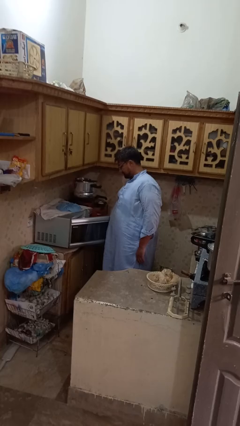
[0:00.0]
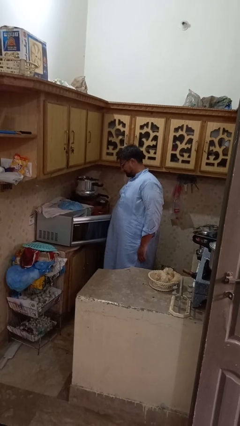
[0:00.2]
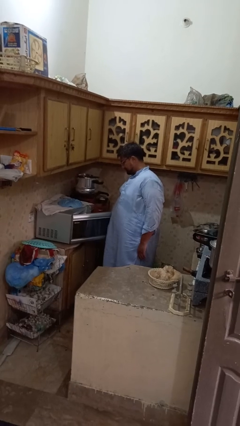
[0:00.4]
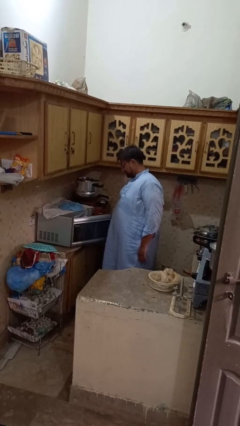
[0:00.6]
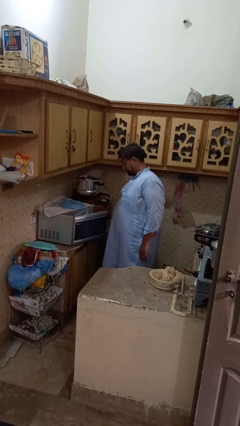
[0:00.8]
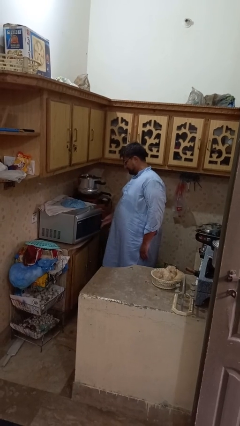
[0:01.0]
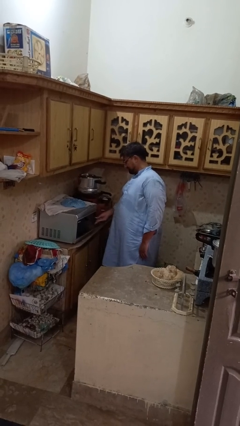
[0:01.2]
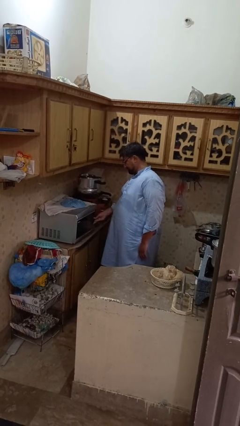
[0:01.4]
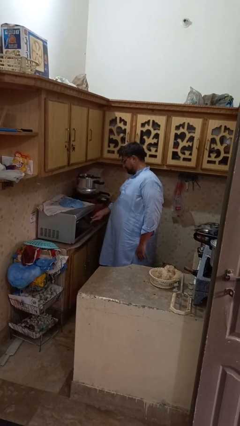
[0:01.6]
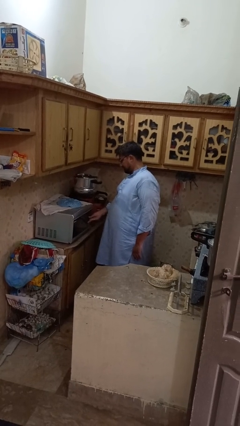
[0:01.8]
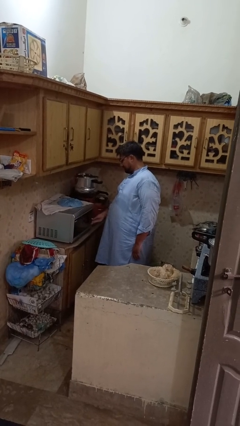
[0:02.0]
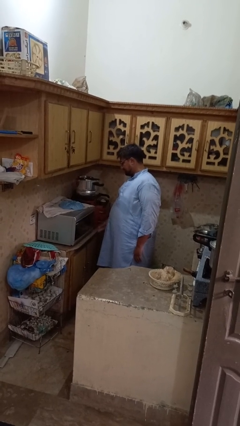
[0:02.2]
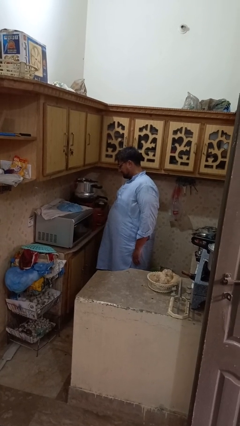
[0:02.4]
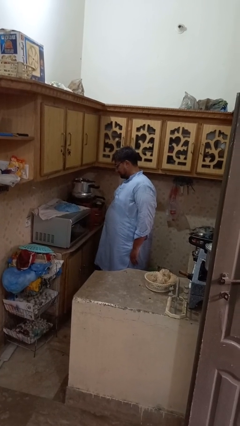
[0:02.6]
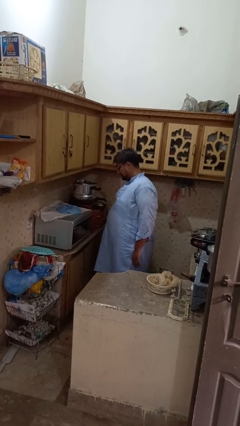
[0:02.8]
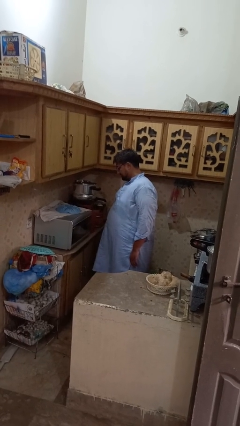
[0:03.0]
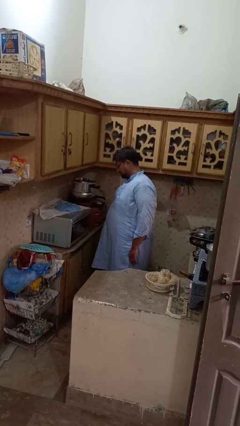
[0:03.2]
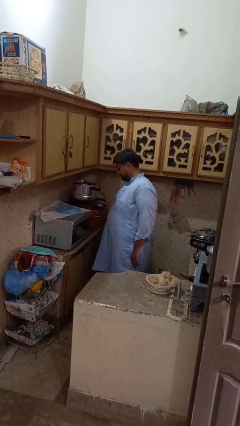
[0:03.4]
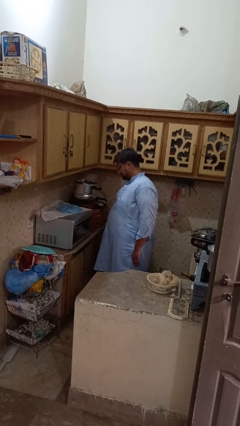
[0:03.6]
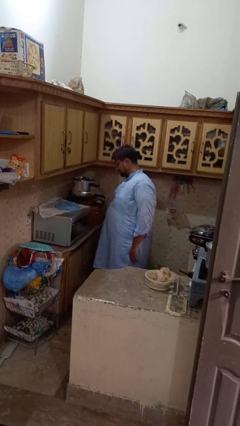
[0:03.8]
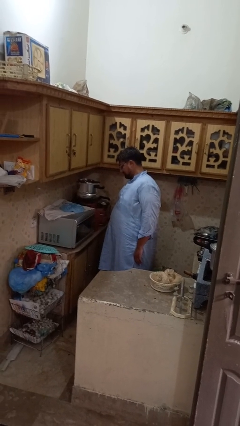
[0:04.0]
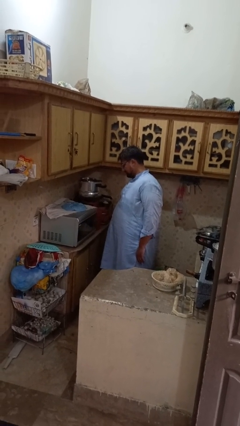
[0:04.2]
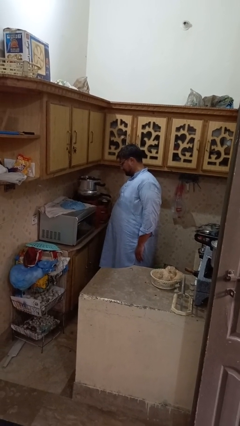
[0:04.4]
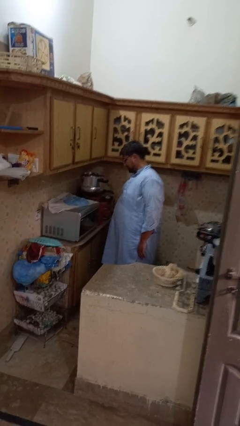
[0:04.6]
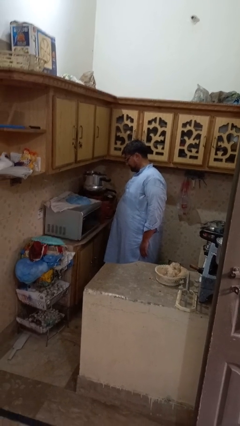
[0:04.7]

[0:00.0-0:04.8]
person closes microwave

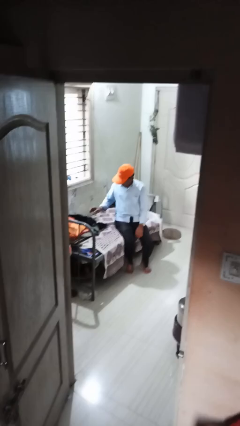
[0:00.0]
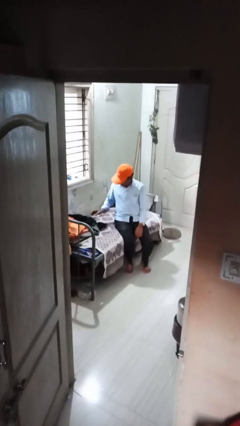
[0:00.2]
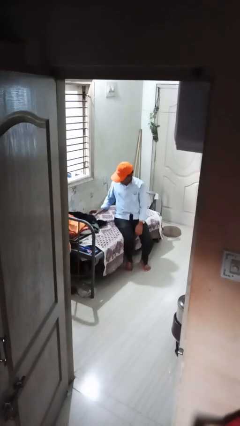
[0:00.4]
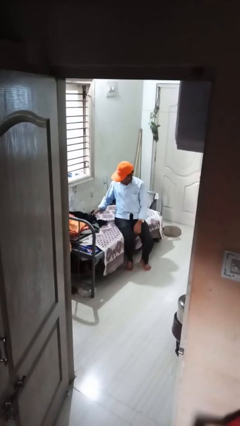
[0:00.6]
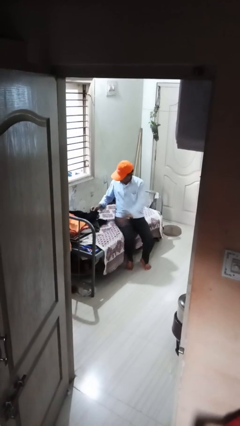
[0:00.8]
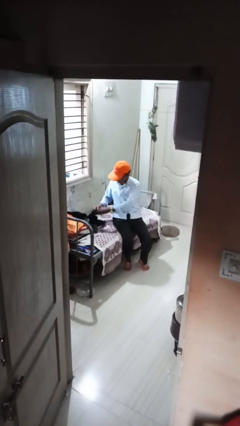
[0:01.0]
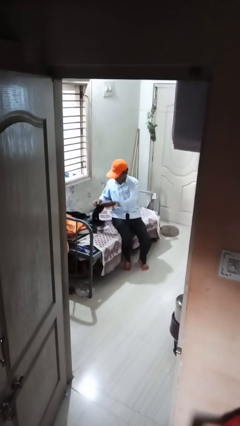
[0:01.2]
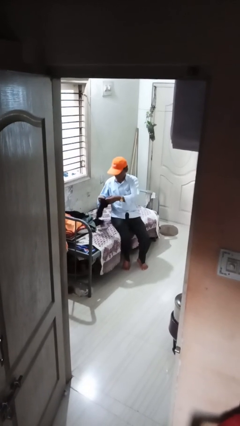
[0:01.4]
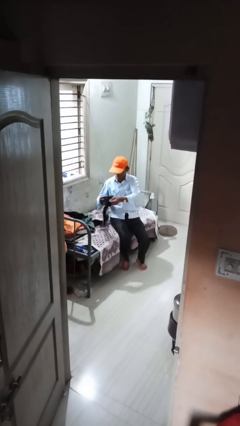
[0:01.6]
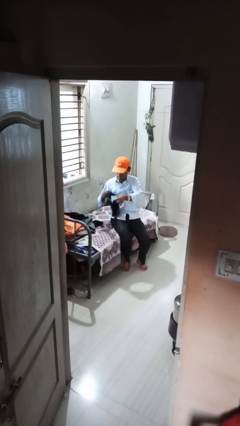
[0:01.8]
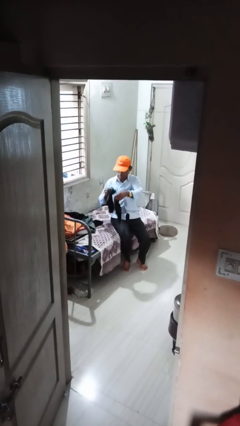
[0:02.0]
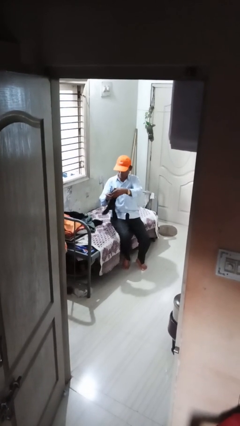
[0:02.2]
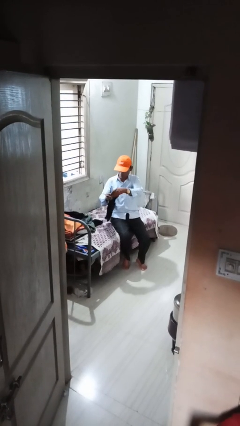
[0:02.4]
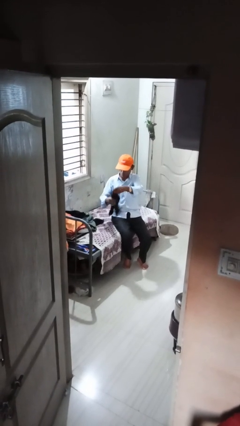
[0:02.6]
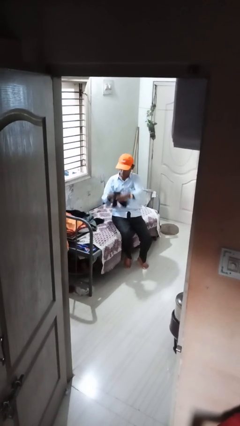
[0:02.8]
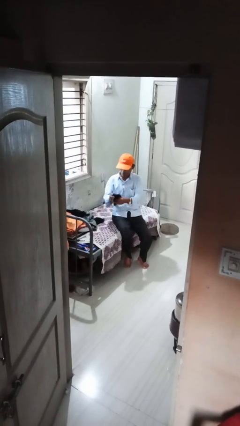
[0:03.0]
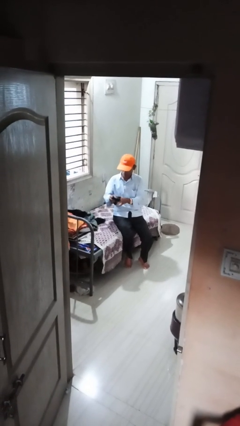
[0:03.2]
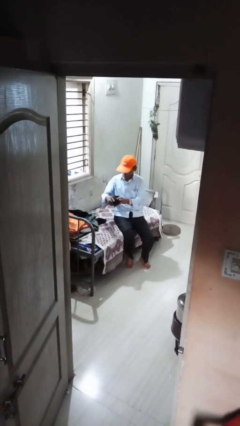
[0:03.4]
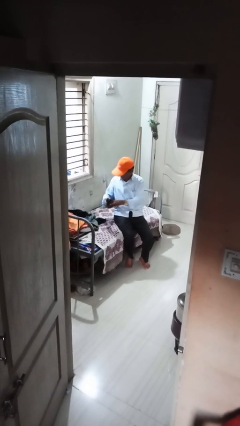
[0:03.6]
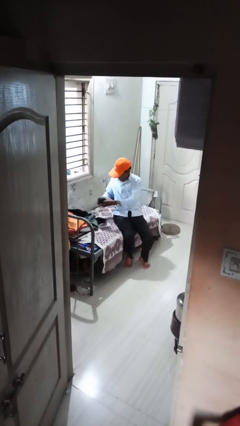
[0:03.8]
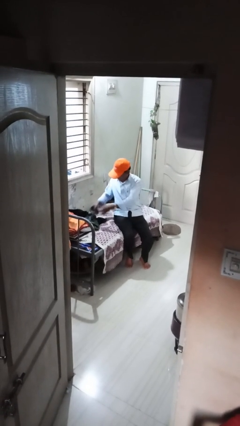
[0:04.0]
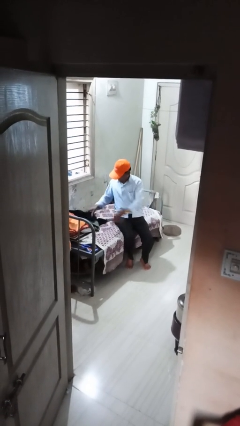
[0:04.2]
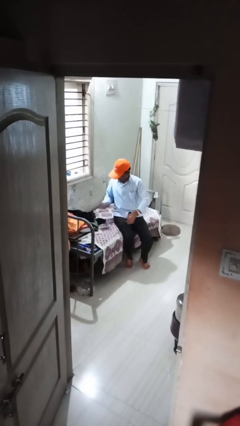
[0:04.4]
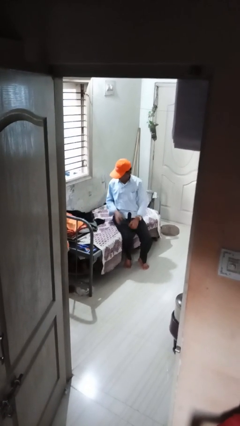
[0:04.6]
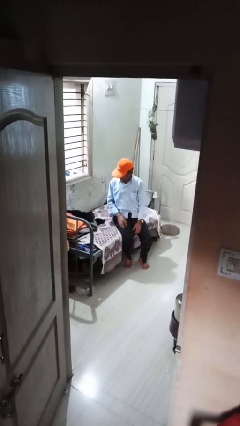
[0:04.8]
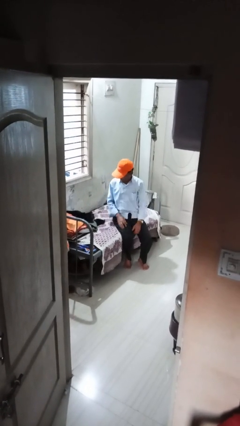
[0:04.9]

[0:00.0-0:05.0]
person folds socks

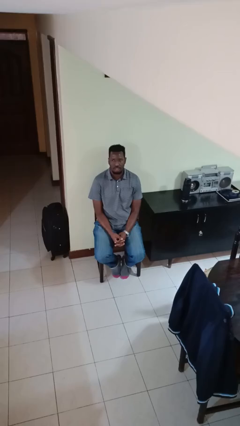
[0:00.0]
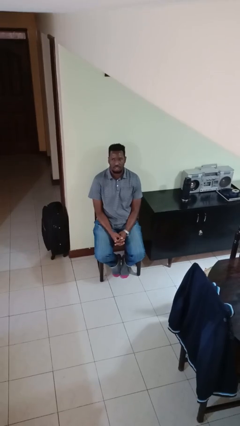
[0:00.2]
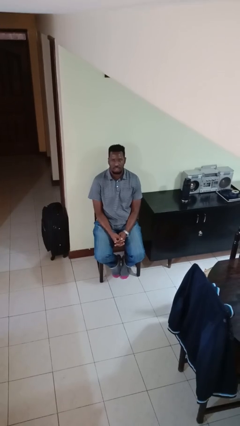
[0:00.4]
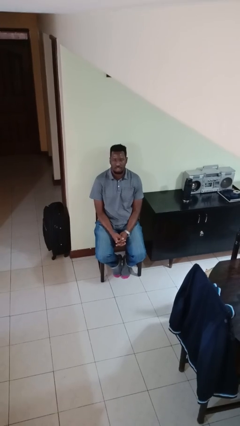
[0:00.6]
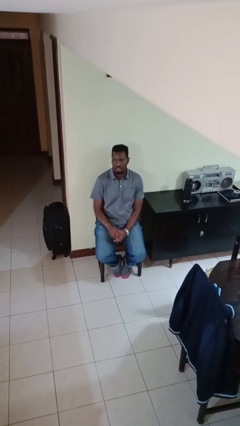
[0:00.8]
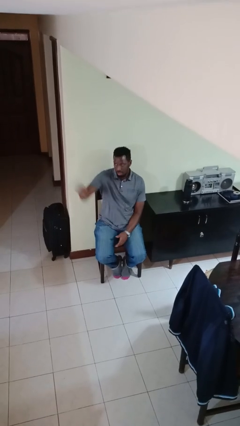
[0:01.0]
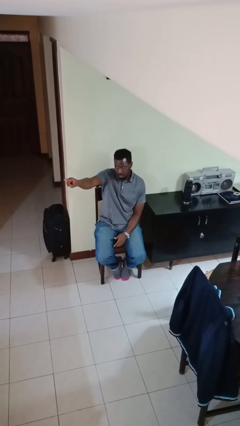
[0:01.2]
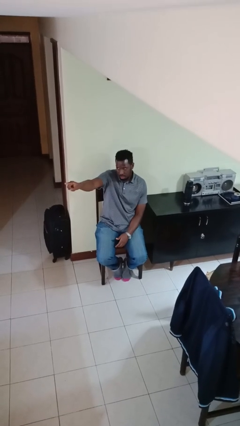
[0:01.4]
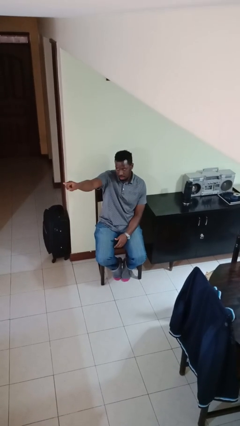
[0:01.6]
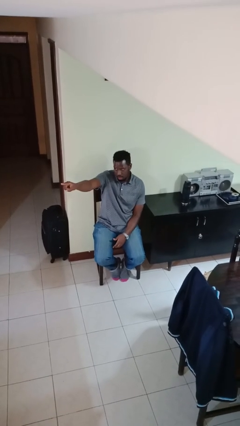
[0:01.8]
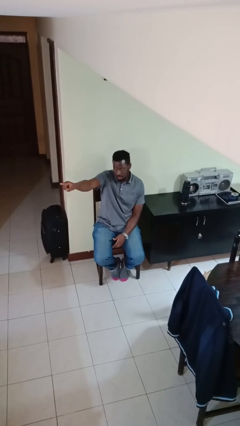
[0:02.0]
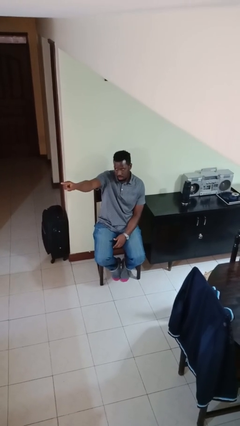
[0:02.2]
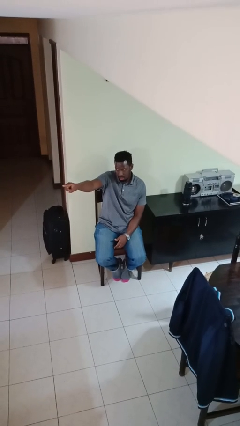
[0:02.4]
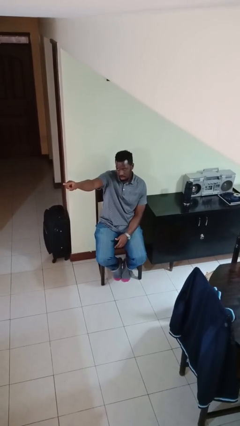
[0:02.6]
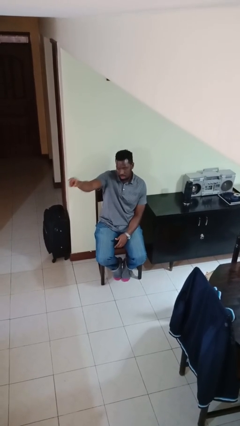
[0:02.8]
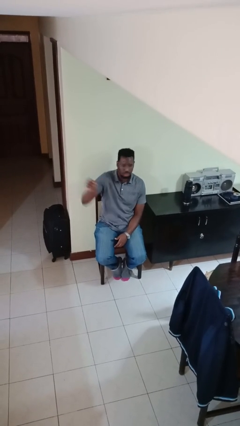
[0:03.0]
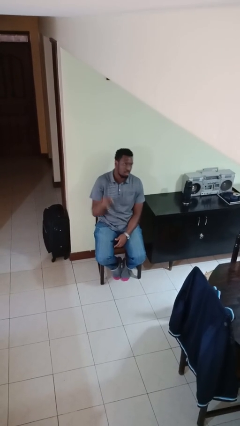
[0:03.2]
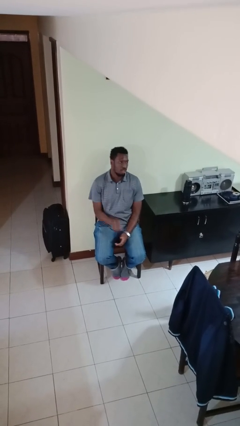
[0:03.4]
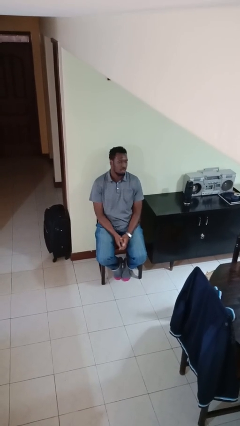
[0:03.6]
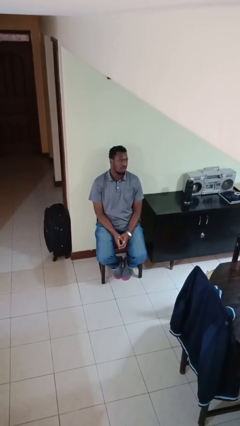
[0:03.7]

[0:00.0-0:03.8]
person points at person

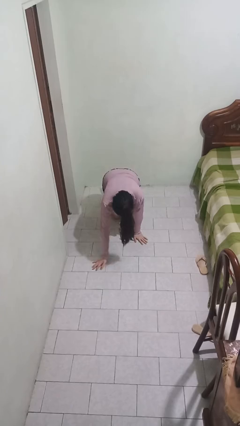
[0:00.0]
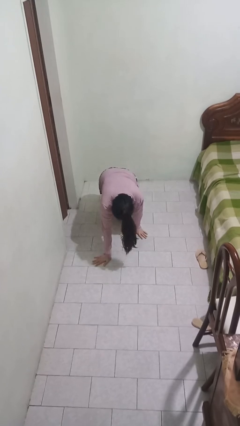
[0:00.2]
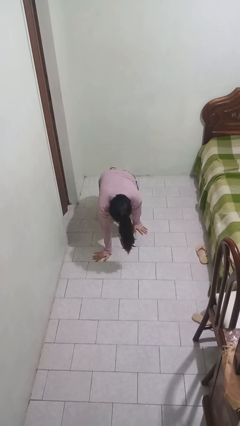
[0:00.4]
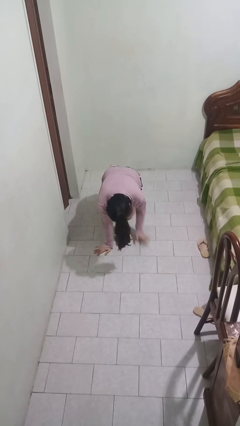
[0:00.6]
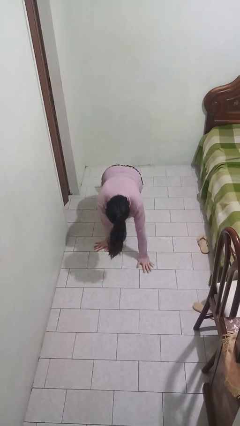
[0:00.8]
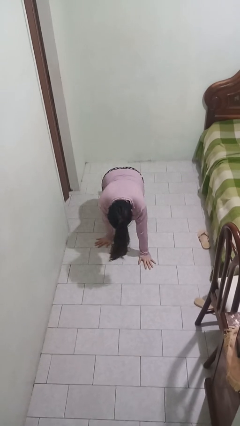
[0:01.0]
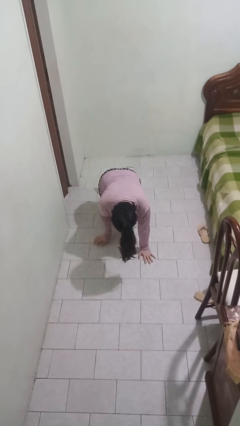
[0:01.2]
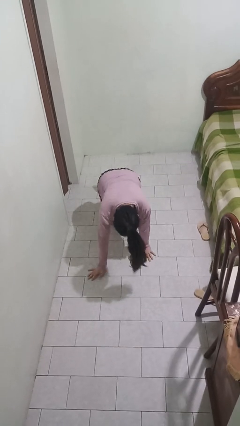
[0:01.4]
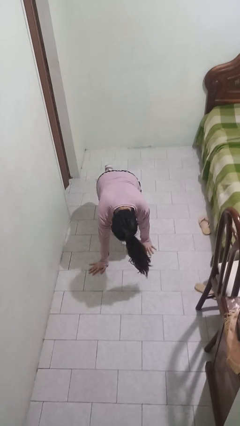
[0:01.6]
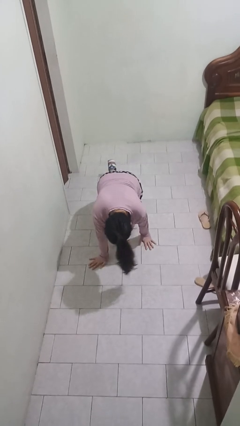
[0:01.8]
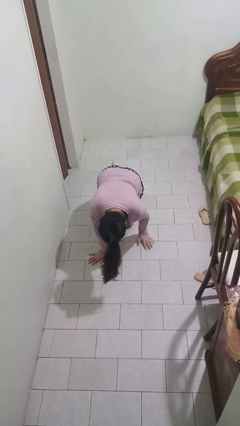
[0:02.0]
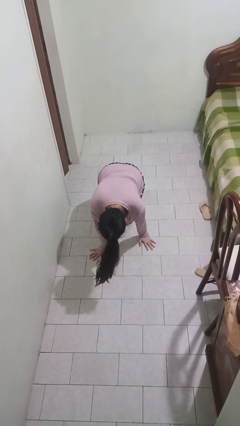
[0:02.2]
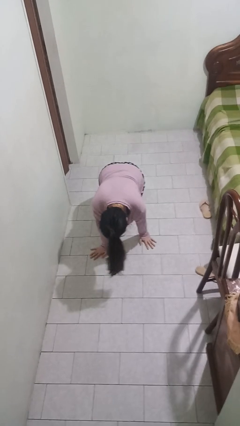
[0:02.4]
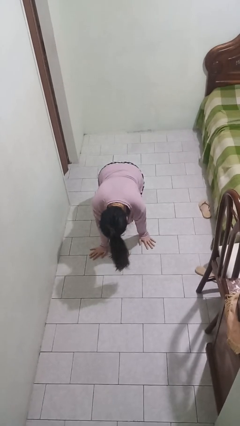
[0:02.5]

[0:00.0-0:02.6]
person crawls

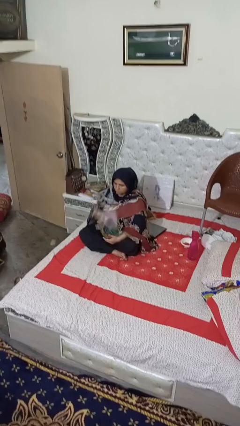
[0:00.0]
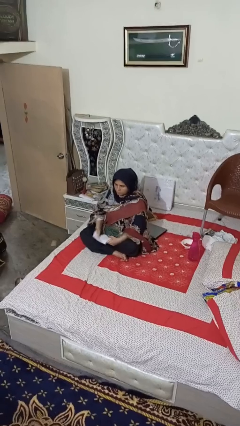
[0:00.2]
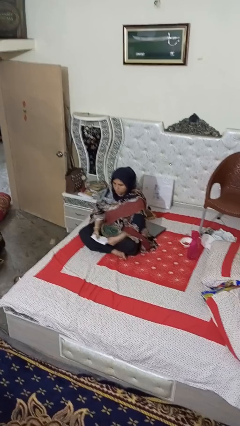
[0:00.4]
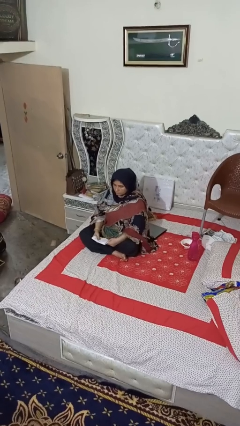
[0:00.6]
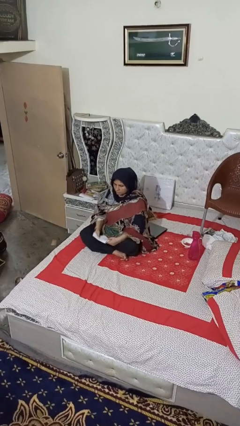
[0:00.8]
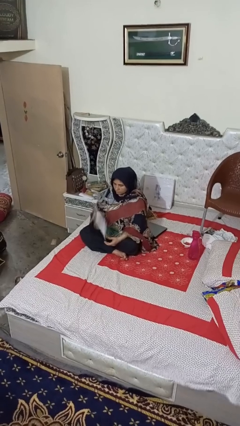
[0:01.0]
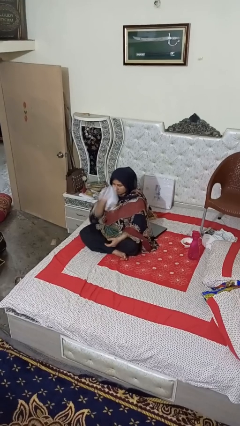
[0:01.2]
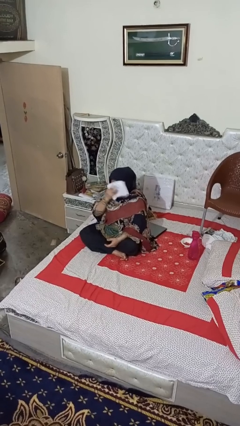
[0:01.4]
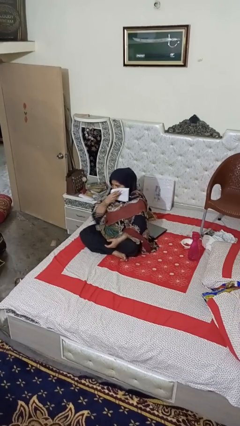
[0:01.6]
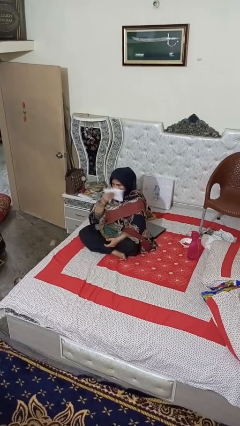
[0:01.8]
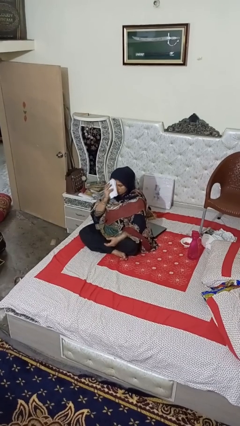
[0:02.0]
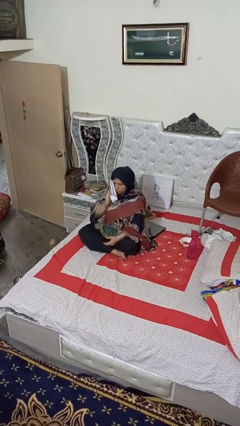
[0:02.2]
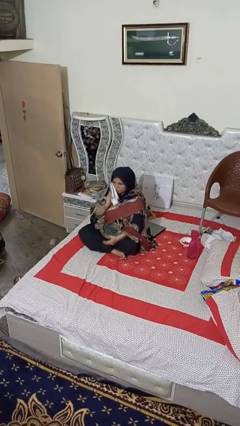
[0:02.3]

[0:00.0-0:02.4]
person wipes mouth with napkin
